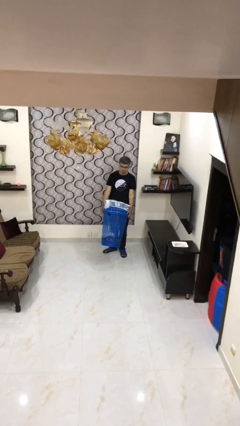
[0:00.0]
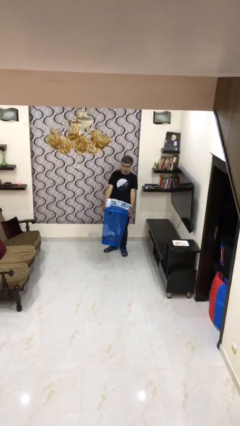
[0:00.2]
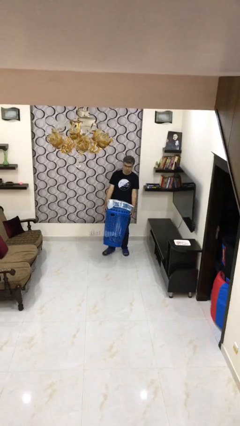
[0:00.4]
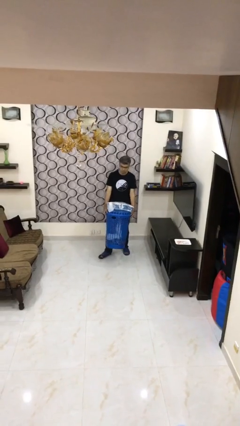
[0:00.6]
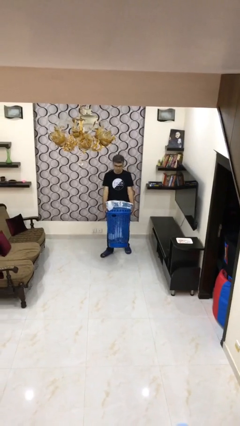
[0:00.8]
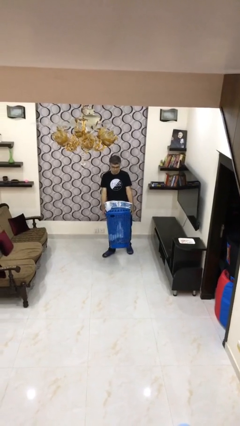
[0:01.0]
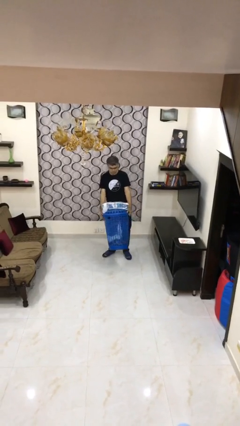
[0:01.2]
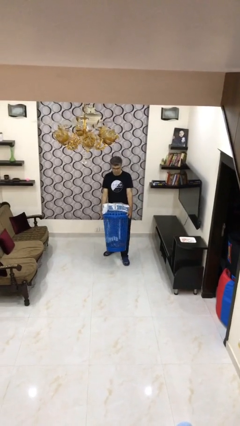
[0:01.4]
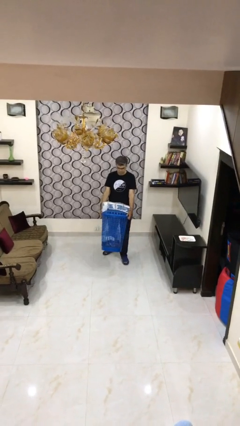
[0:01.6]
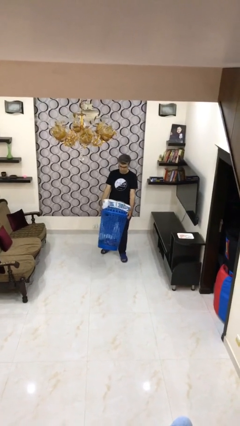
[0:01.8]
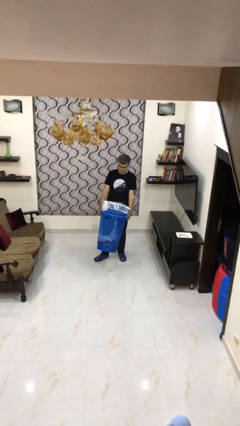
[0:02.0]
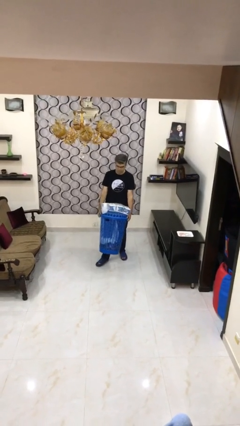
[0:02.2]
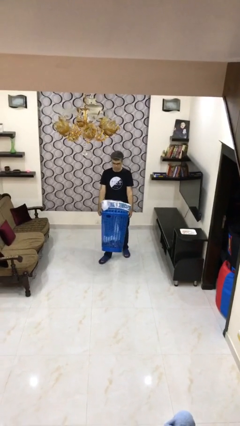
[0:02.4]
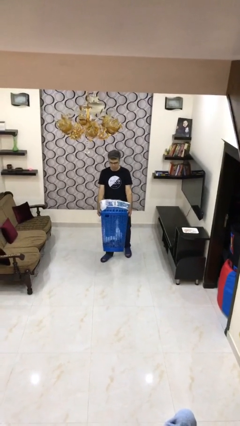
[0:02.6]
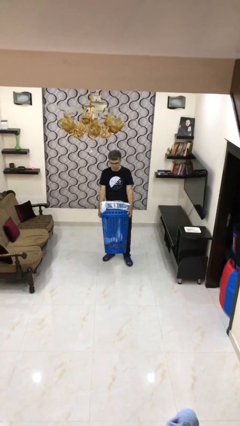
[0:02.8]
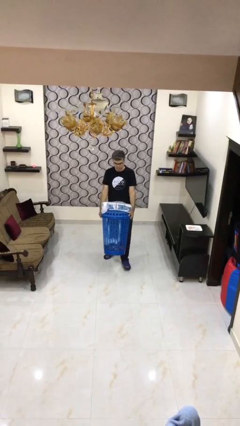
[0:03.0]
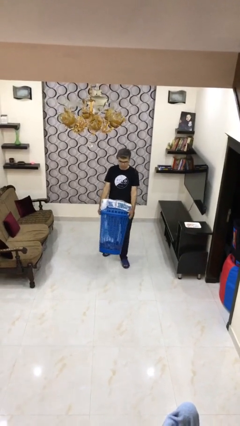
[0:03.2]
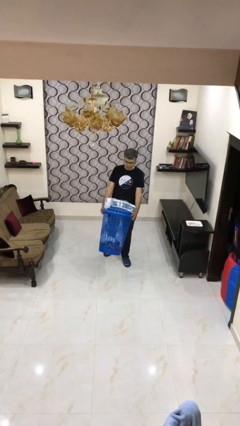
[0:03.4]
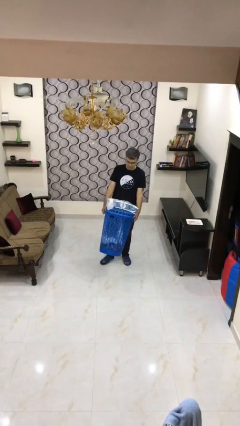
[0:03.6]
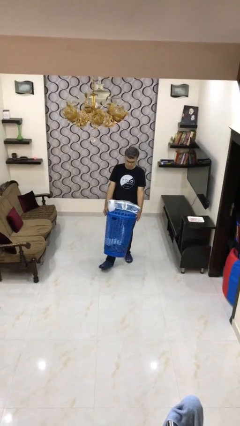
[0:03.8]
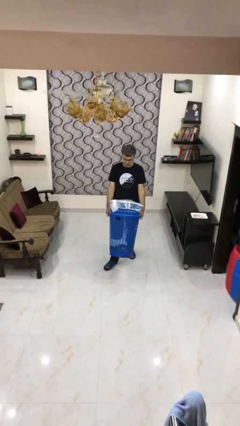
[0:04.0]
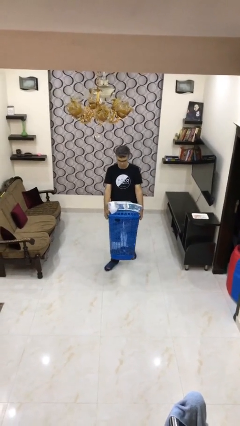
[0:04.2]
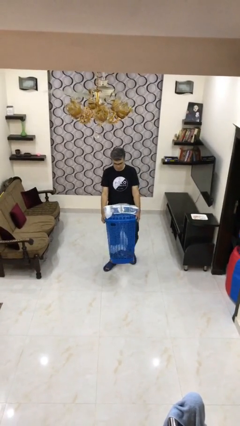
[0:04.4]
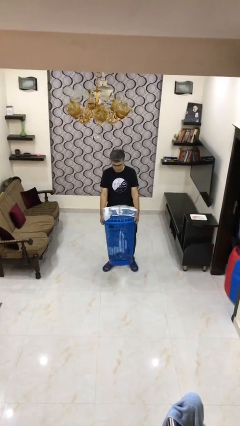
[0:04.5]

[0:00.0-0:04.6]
person carries heavy object

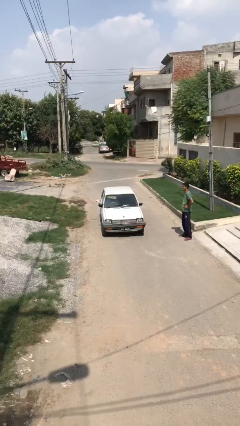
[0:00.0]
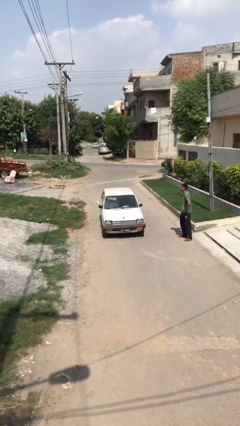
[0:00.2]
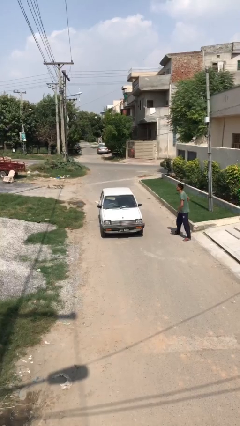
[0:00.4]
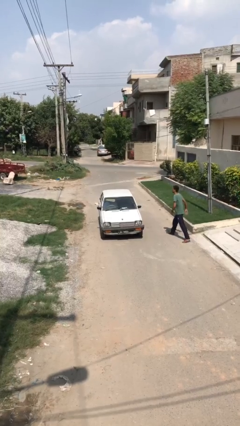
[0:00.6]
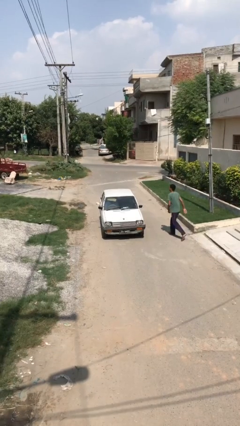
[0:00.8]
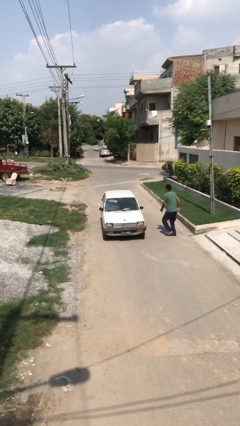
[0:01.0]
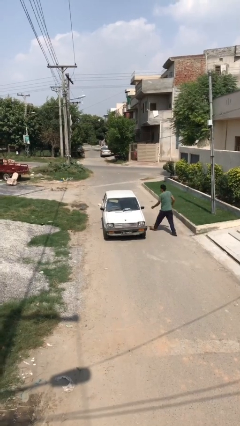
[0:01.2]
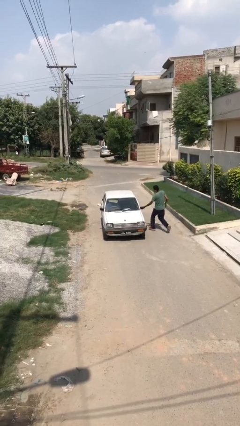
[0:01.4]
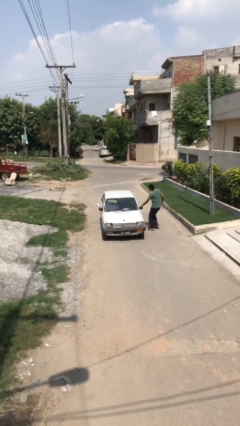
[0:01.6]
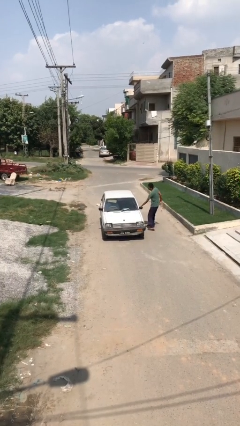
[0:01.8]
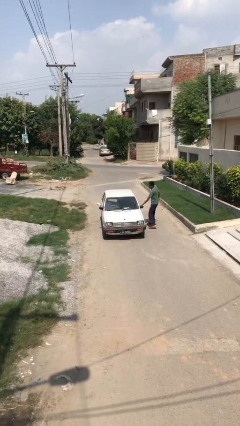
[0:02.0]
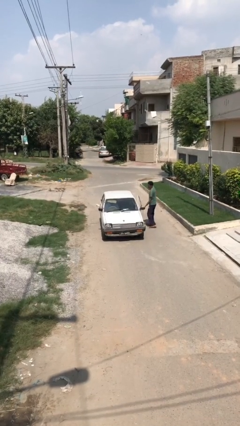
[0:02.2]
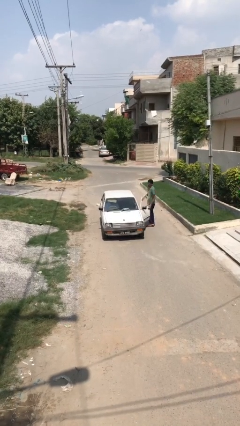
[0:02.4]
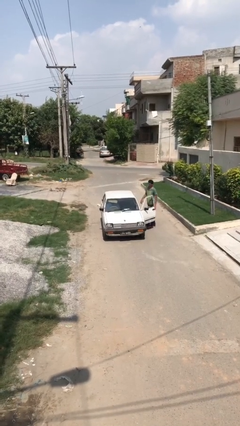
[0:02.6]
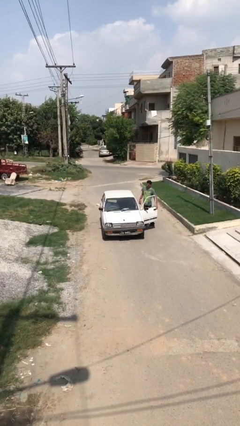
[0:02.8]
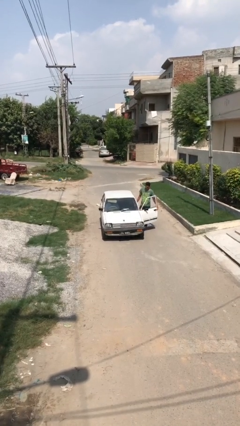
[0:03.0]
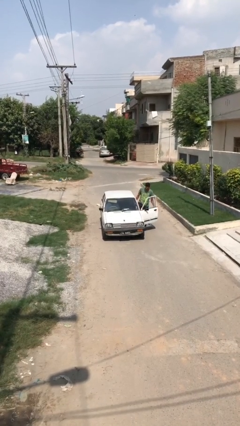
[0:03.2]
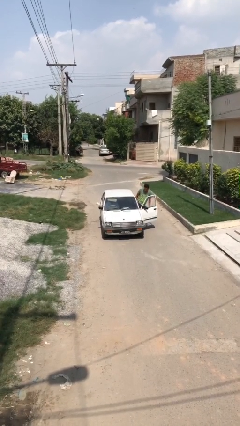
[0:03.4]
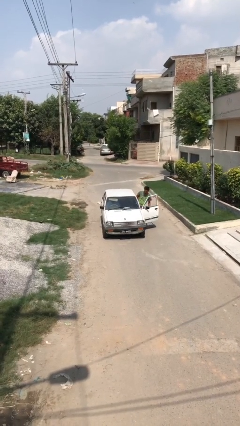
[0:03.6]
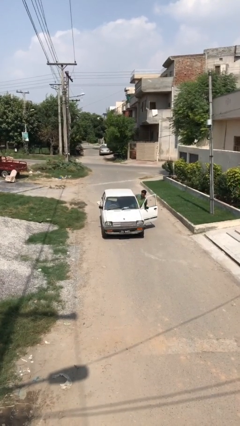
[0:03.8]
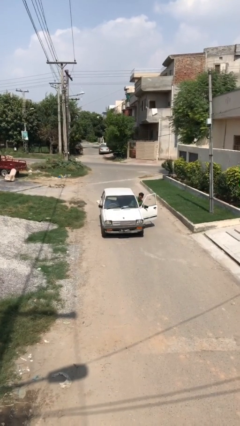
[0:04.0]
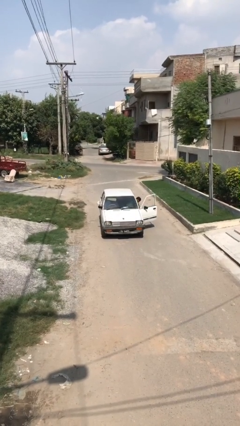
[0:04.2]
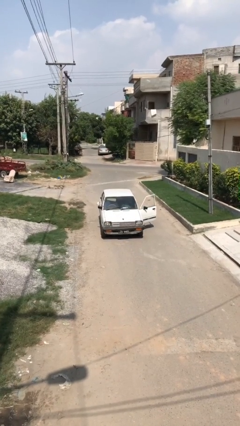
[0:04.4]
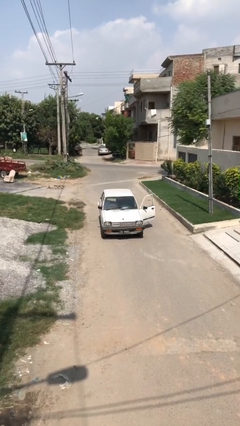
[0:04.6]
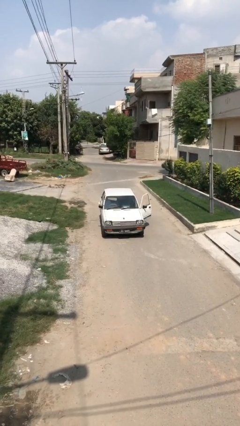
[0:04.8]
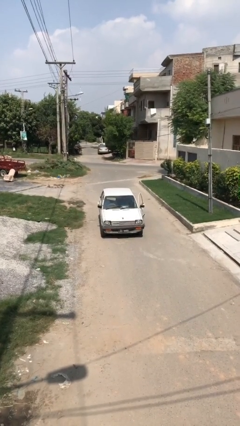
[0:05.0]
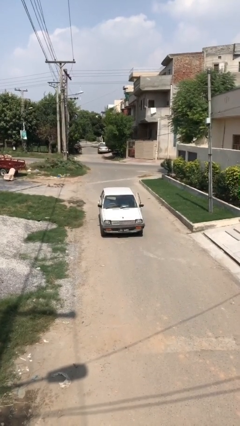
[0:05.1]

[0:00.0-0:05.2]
car picks up person

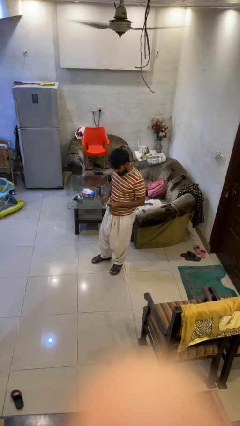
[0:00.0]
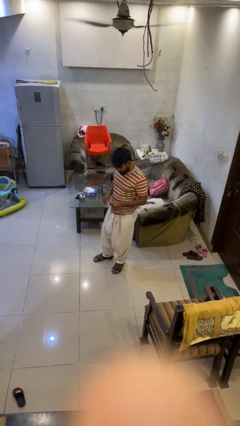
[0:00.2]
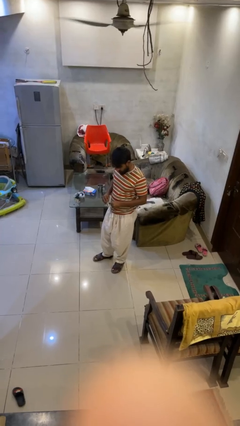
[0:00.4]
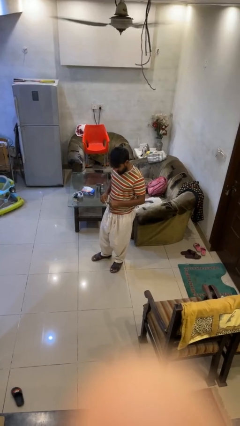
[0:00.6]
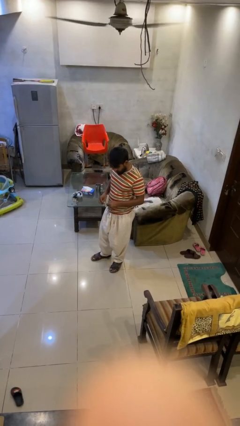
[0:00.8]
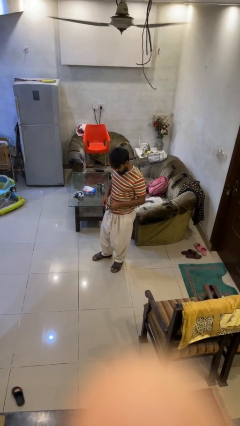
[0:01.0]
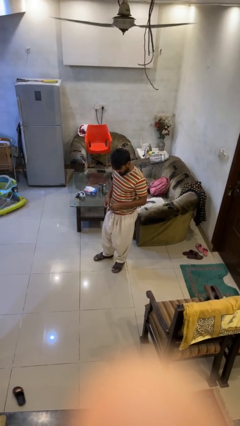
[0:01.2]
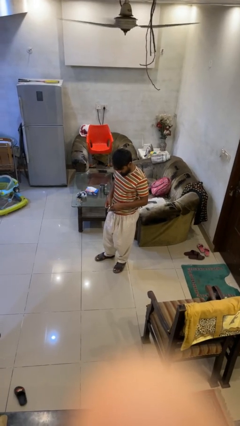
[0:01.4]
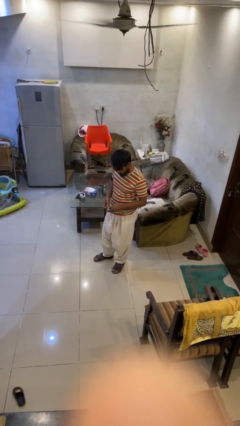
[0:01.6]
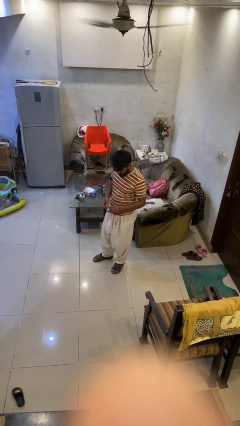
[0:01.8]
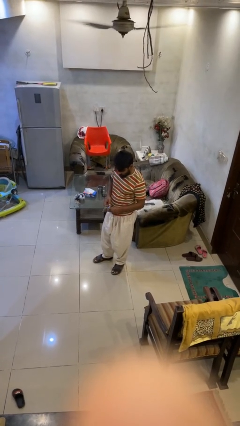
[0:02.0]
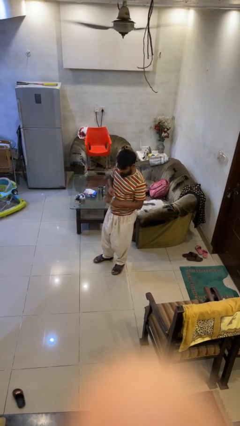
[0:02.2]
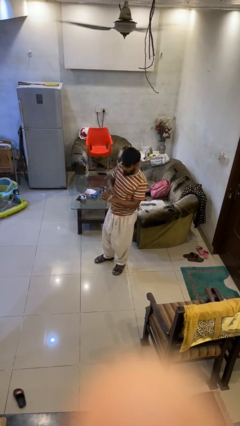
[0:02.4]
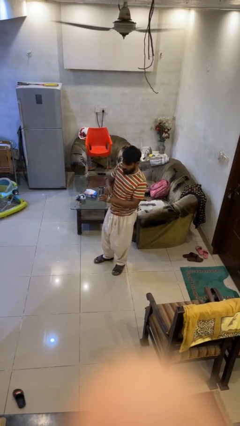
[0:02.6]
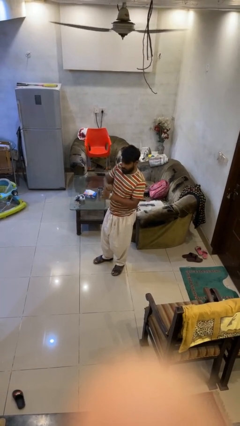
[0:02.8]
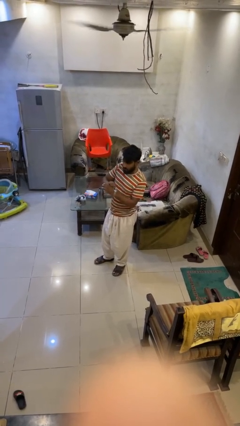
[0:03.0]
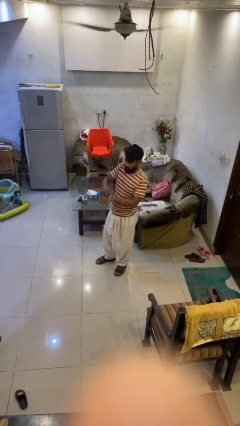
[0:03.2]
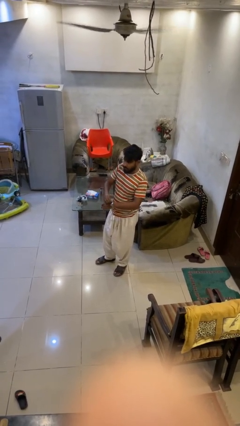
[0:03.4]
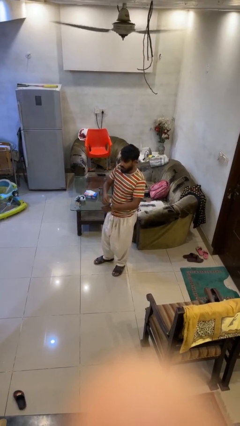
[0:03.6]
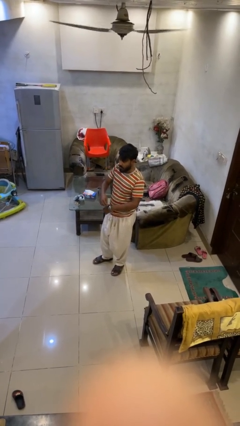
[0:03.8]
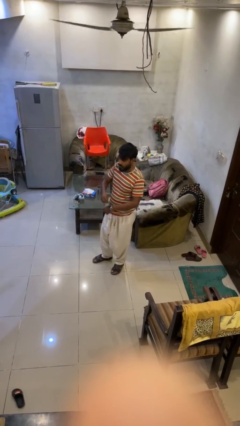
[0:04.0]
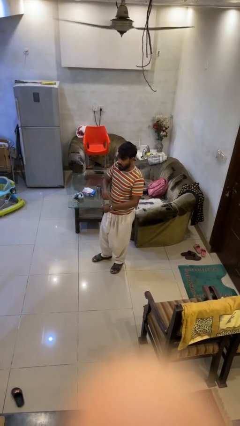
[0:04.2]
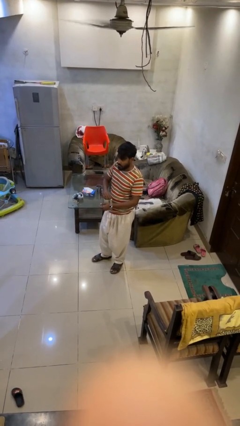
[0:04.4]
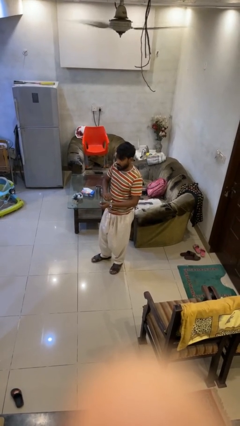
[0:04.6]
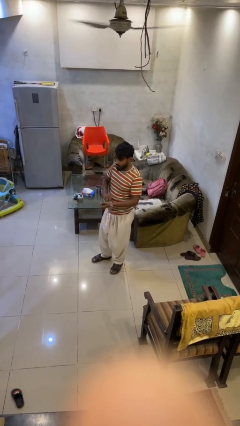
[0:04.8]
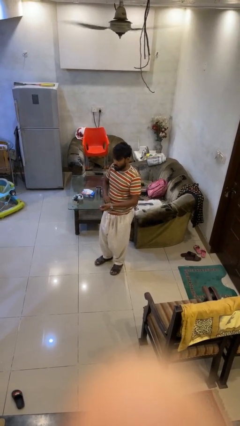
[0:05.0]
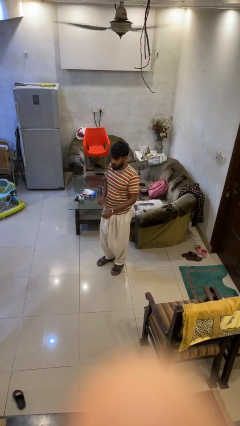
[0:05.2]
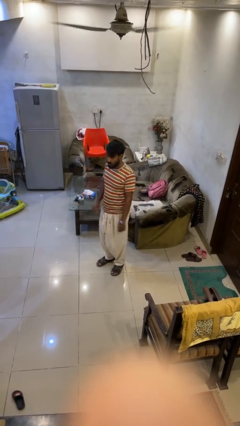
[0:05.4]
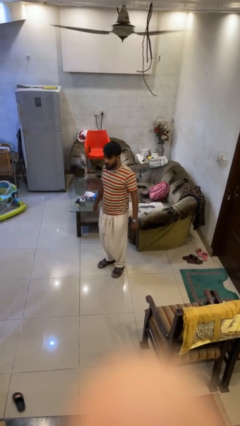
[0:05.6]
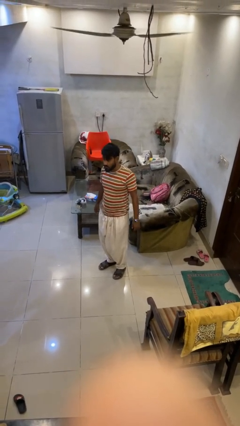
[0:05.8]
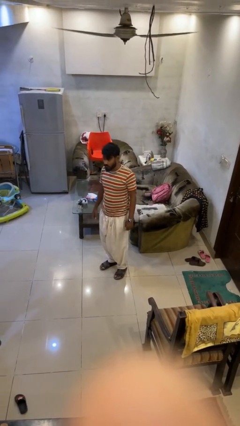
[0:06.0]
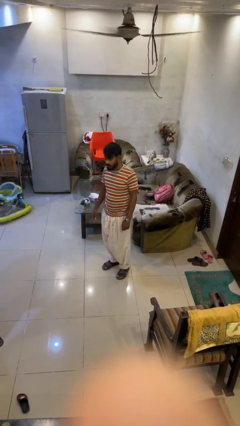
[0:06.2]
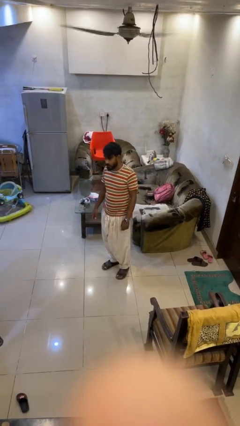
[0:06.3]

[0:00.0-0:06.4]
person puts on wristwatch

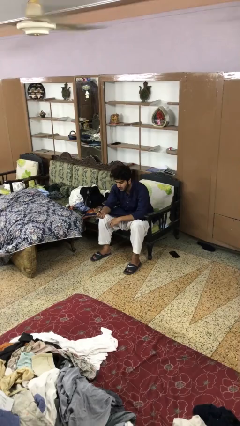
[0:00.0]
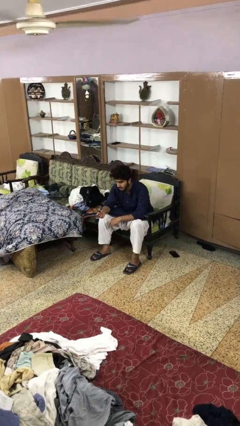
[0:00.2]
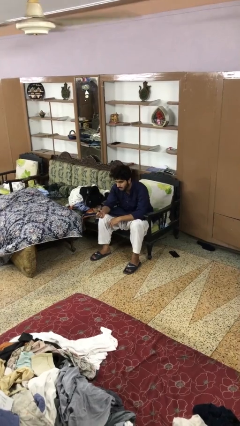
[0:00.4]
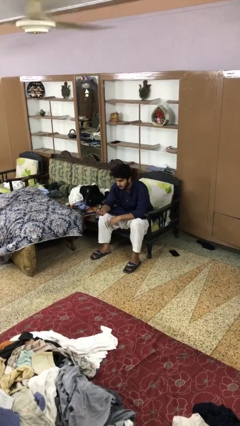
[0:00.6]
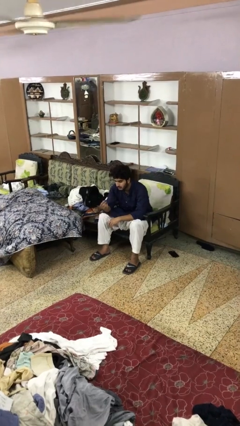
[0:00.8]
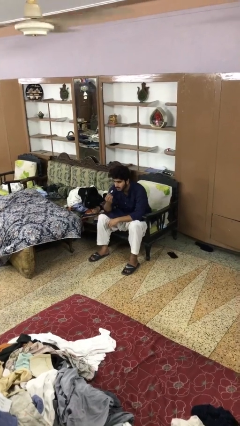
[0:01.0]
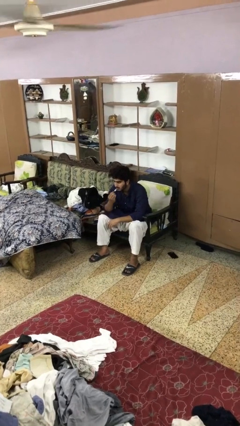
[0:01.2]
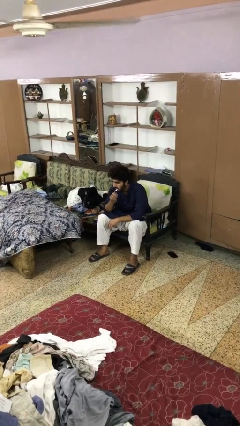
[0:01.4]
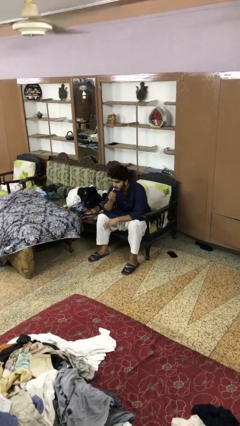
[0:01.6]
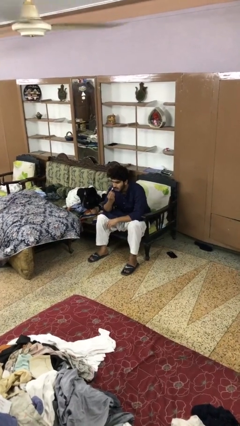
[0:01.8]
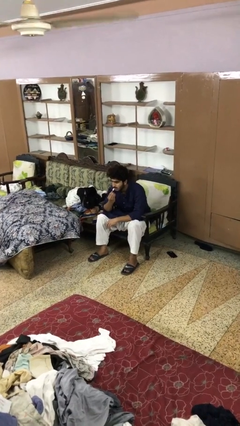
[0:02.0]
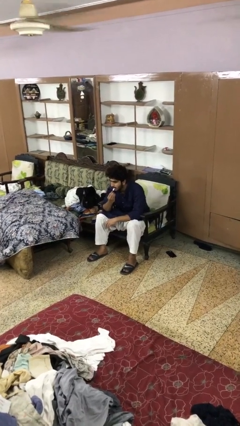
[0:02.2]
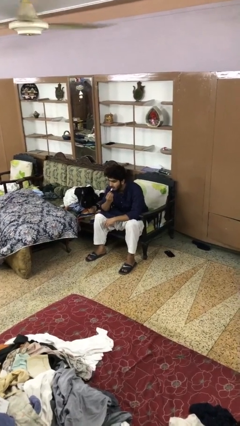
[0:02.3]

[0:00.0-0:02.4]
person applies lip makeup
